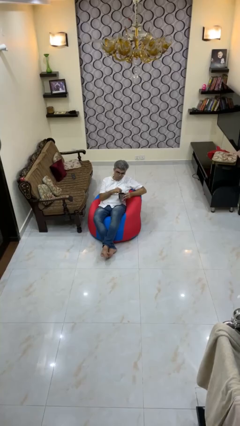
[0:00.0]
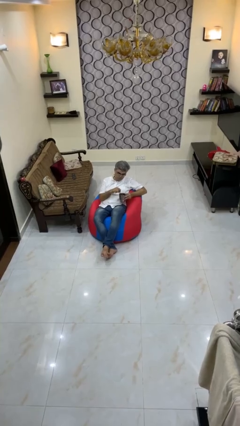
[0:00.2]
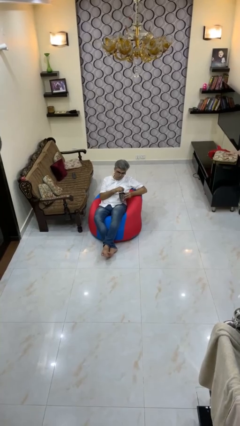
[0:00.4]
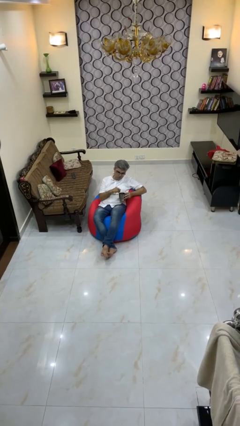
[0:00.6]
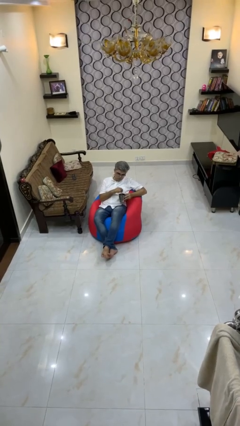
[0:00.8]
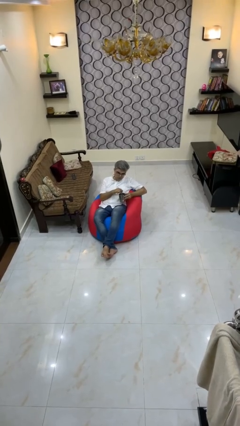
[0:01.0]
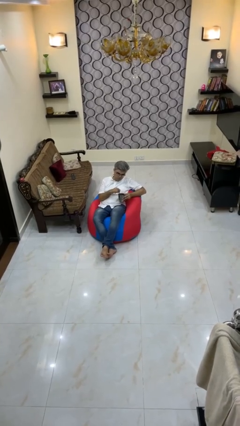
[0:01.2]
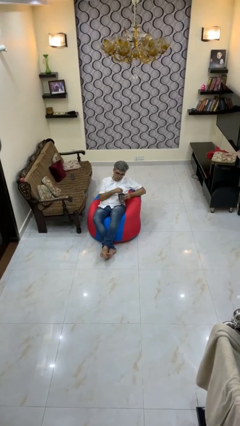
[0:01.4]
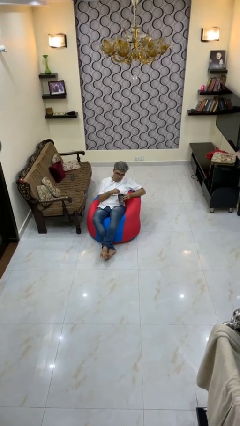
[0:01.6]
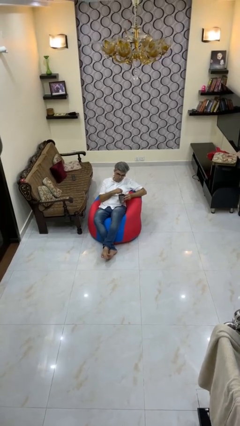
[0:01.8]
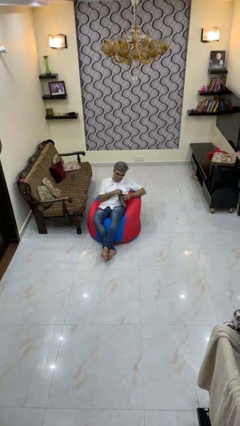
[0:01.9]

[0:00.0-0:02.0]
person stirs mug

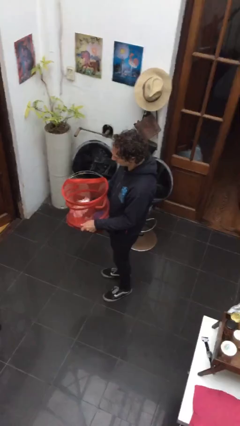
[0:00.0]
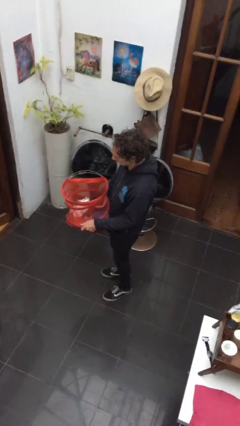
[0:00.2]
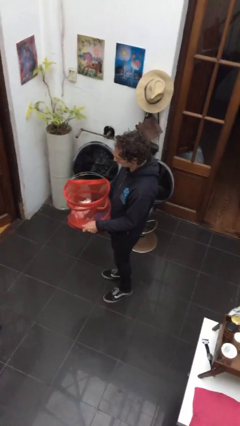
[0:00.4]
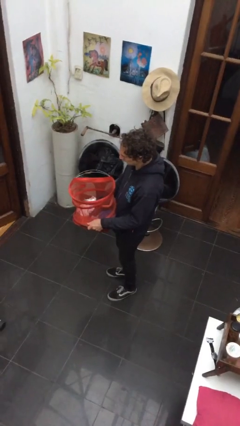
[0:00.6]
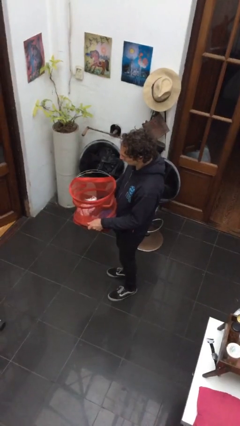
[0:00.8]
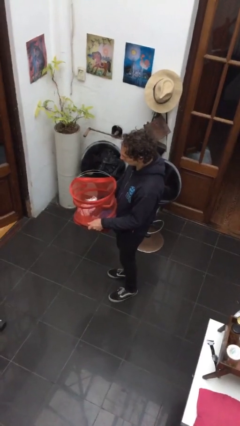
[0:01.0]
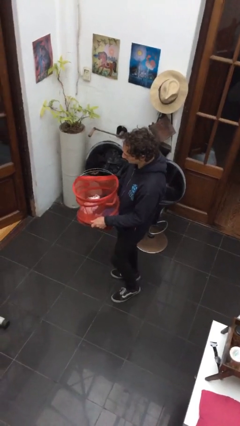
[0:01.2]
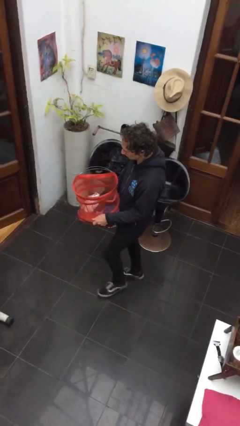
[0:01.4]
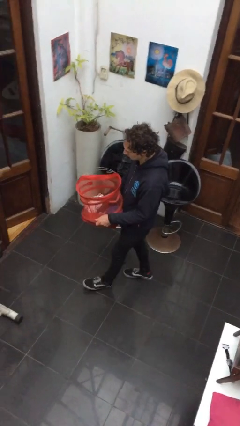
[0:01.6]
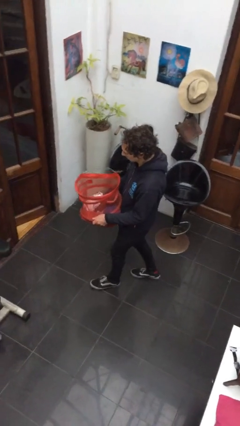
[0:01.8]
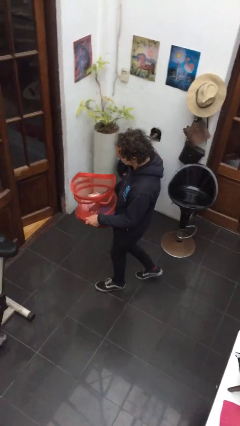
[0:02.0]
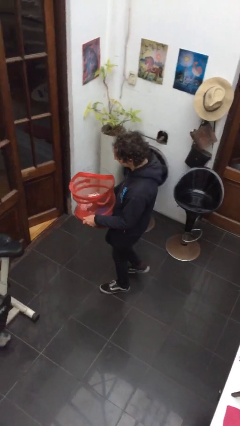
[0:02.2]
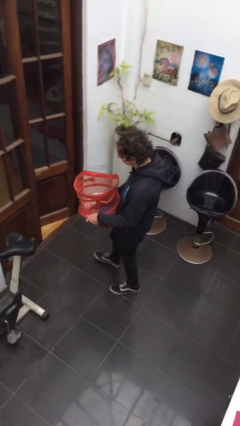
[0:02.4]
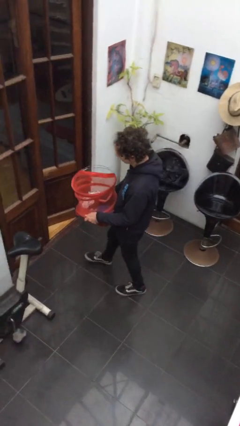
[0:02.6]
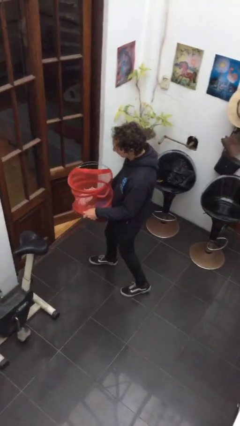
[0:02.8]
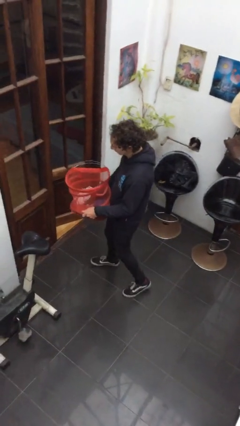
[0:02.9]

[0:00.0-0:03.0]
person carries laundry basket

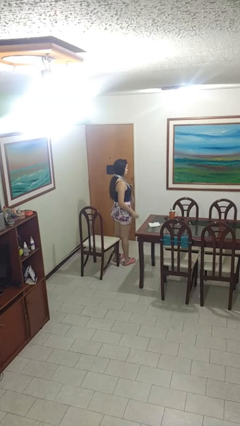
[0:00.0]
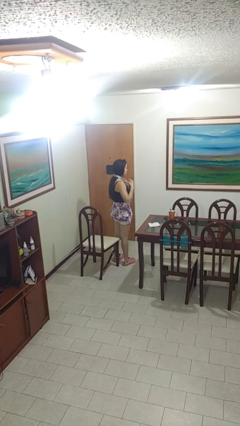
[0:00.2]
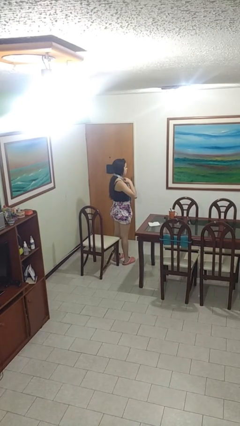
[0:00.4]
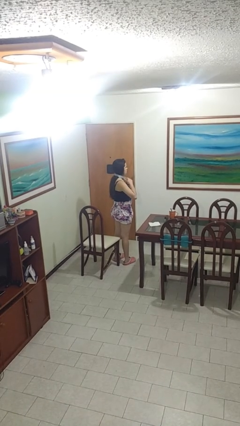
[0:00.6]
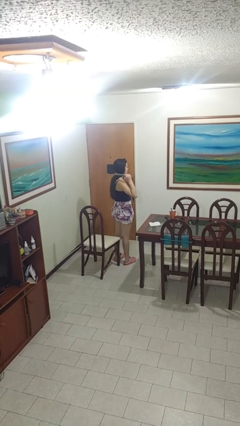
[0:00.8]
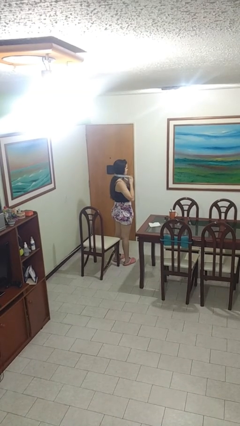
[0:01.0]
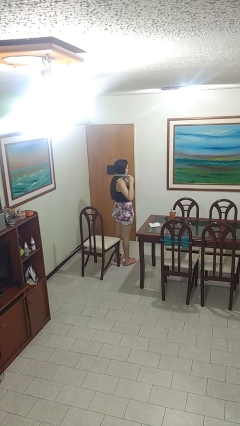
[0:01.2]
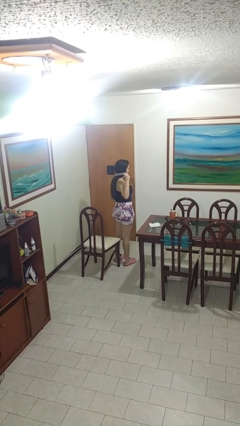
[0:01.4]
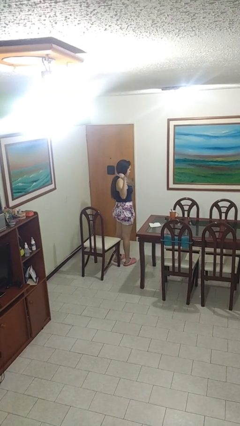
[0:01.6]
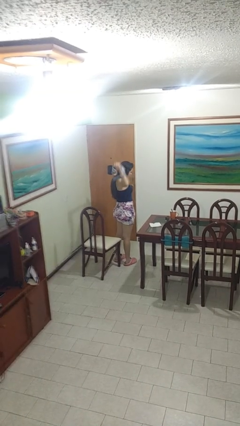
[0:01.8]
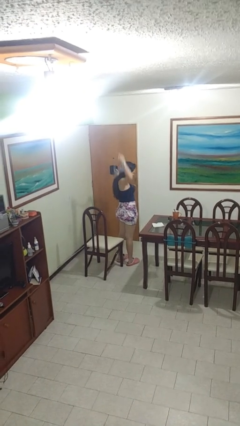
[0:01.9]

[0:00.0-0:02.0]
person takes off necktie

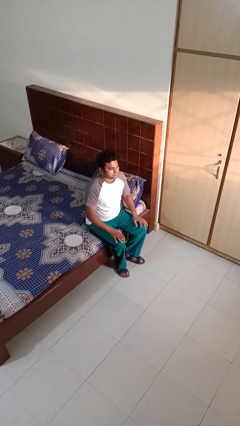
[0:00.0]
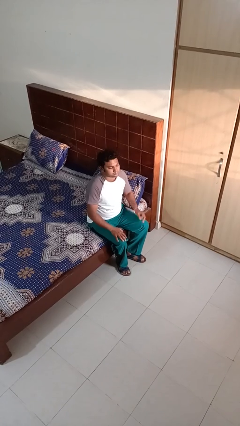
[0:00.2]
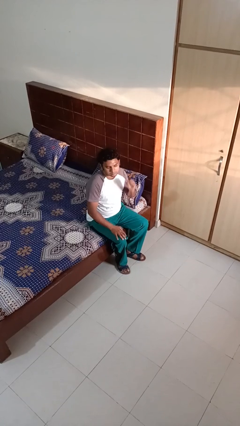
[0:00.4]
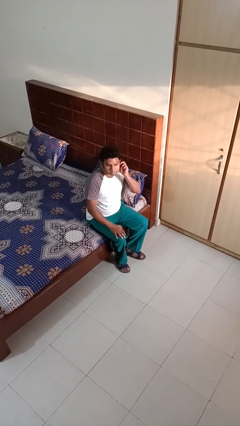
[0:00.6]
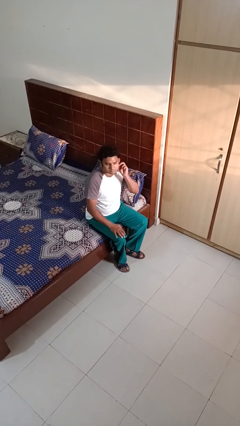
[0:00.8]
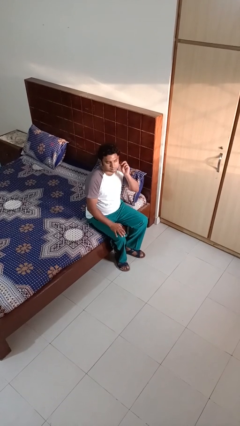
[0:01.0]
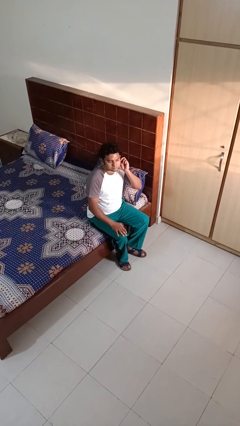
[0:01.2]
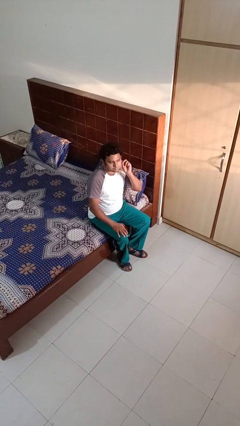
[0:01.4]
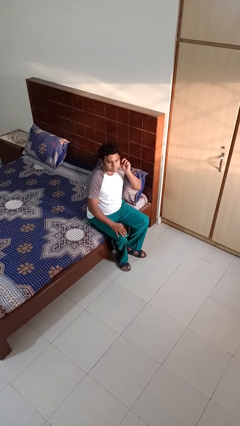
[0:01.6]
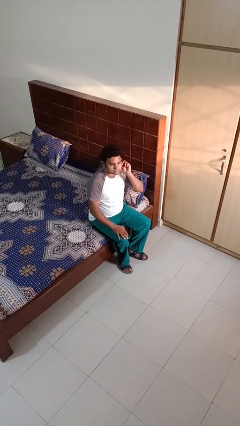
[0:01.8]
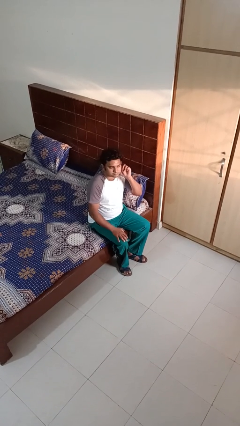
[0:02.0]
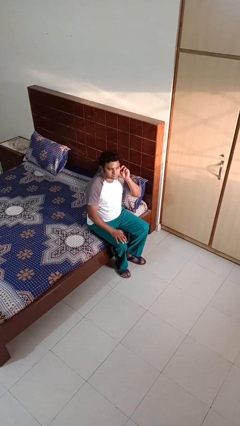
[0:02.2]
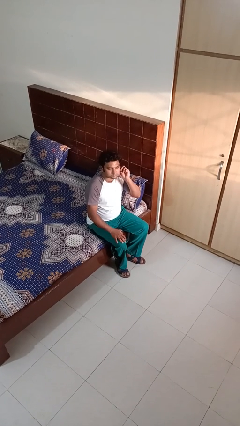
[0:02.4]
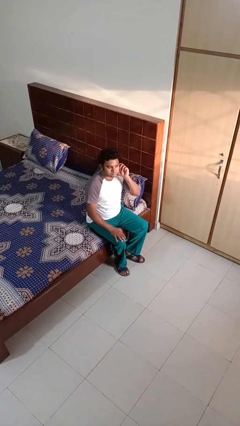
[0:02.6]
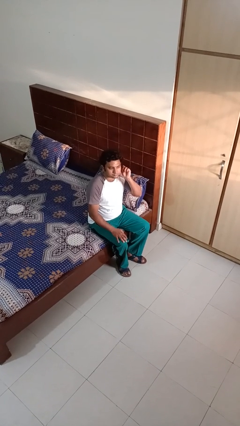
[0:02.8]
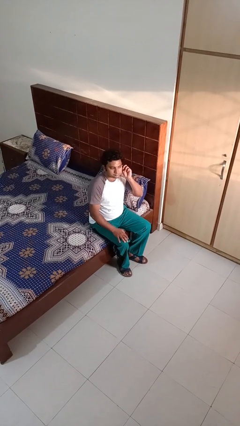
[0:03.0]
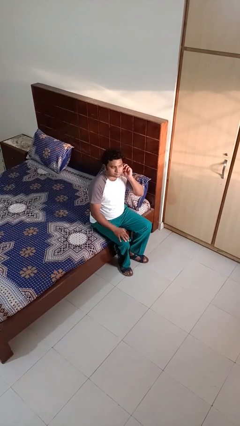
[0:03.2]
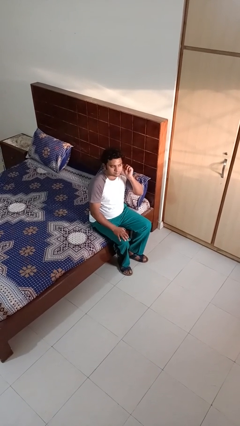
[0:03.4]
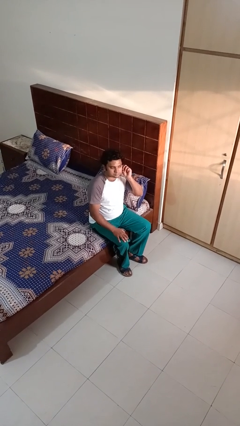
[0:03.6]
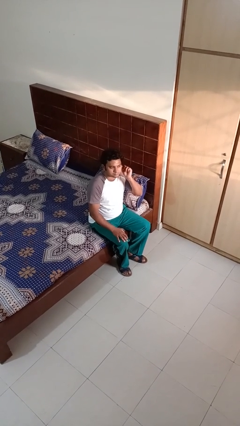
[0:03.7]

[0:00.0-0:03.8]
person touches earlobe

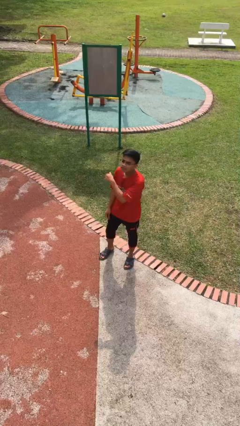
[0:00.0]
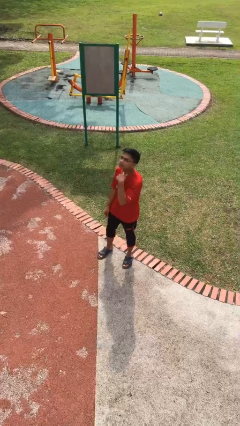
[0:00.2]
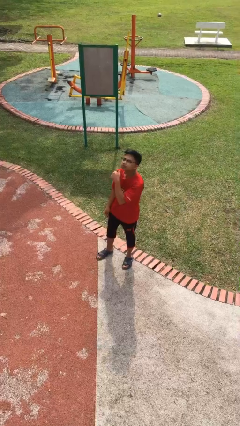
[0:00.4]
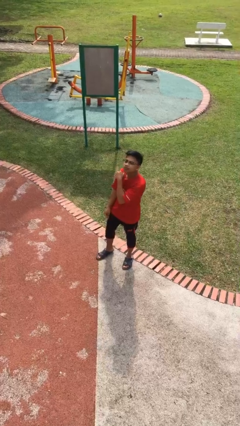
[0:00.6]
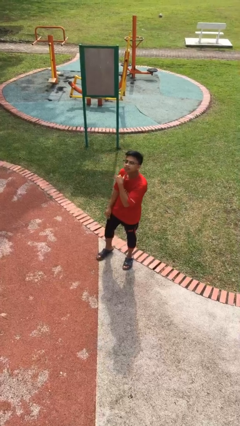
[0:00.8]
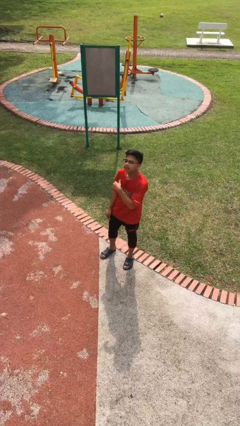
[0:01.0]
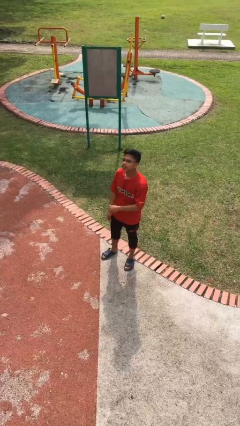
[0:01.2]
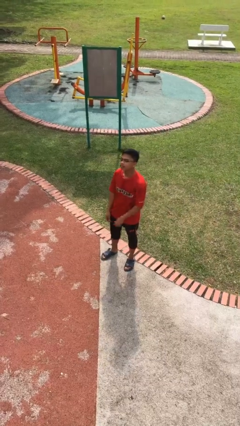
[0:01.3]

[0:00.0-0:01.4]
person gestures cut

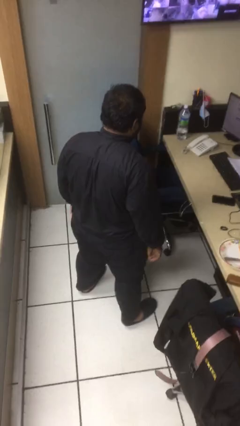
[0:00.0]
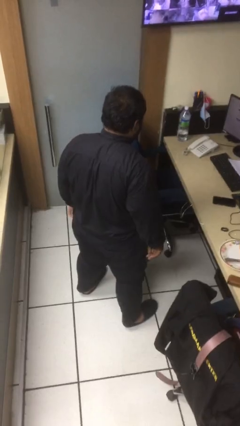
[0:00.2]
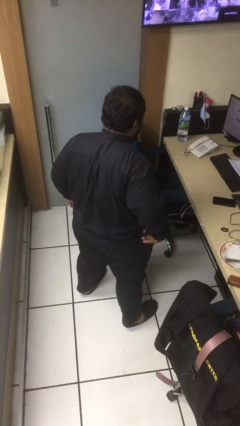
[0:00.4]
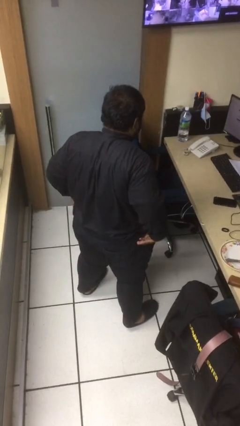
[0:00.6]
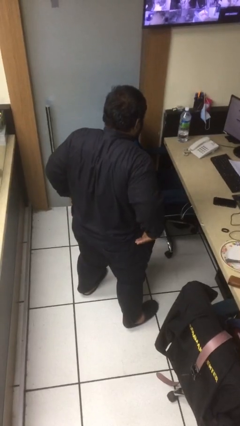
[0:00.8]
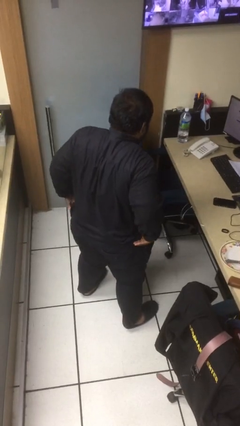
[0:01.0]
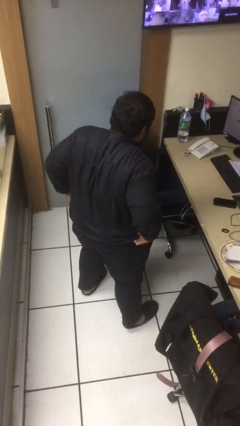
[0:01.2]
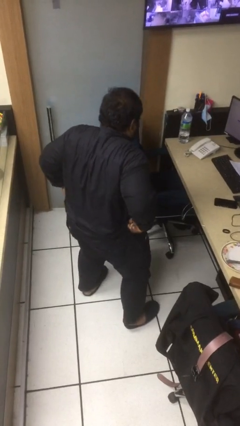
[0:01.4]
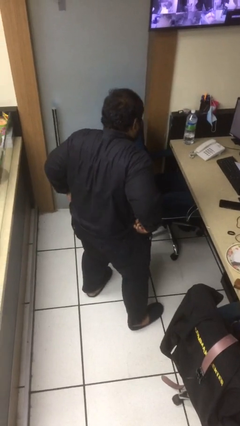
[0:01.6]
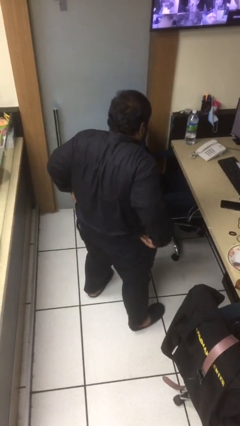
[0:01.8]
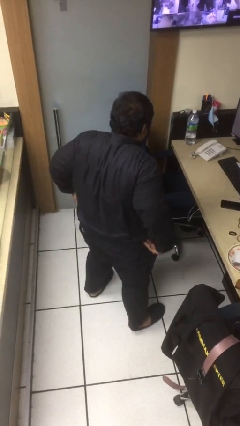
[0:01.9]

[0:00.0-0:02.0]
person hikes up pants

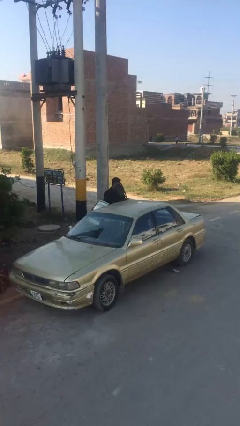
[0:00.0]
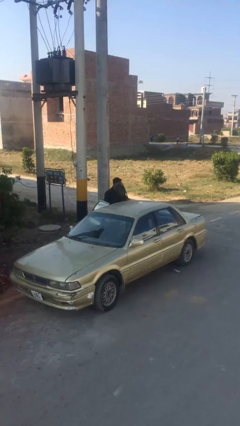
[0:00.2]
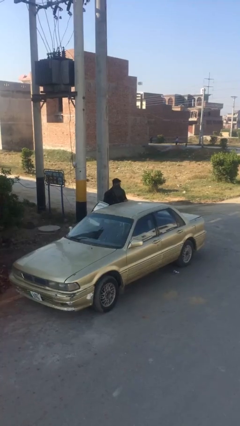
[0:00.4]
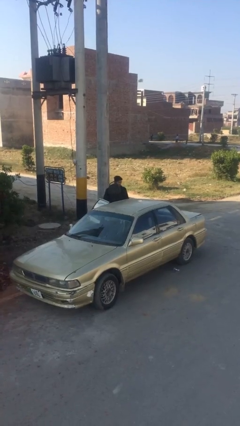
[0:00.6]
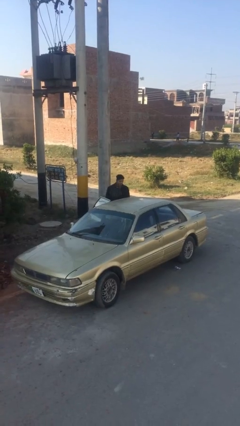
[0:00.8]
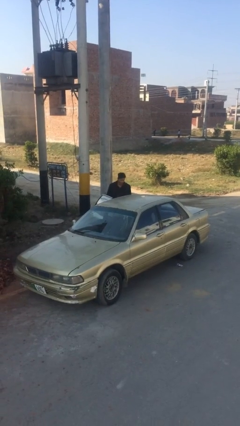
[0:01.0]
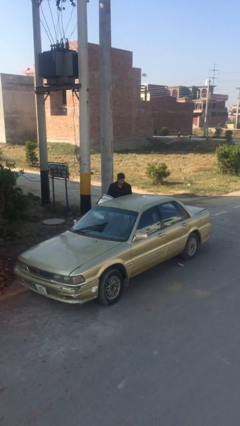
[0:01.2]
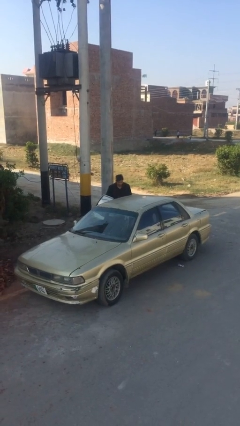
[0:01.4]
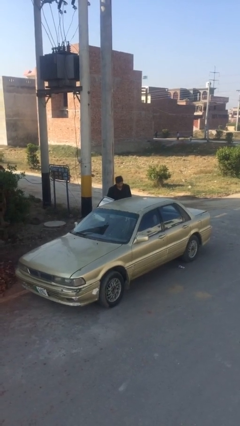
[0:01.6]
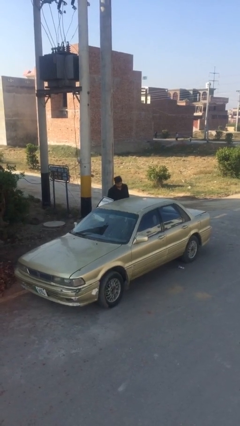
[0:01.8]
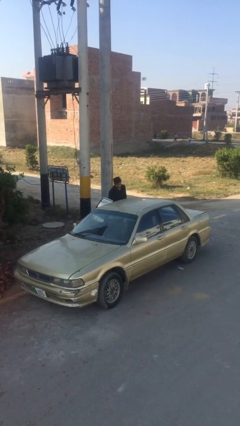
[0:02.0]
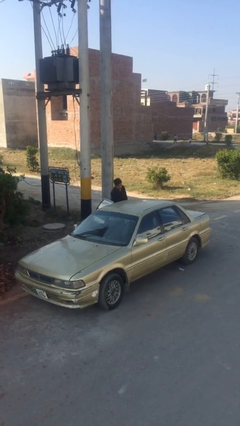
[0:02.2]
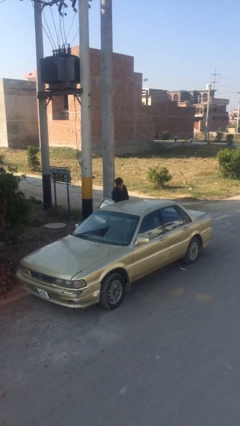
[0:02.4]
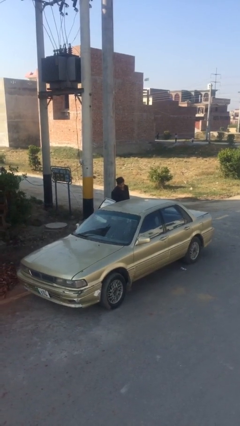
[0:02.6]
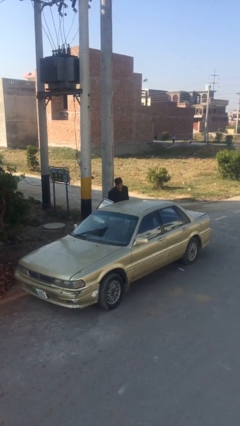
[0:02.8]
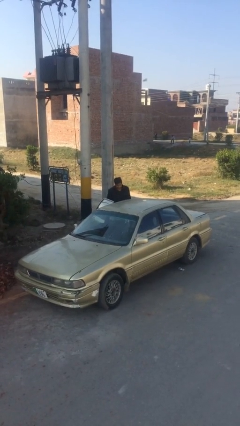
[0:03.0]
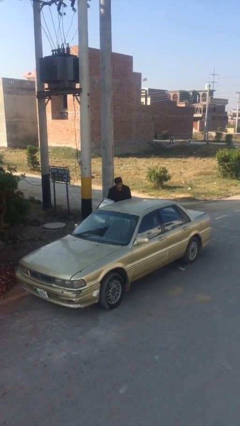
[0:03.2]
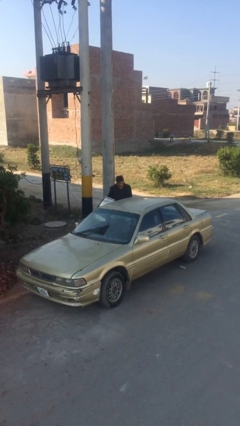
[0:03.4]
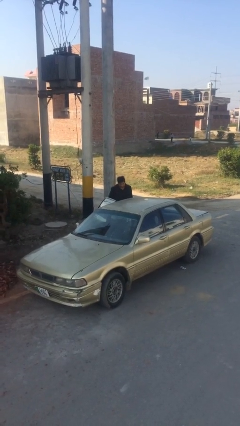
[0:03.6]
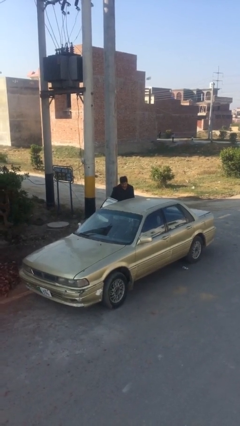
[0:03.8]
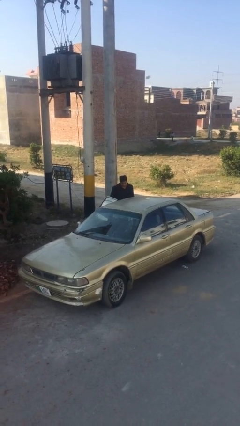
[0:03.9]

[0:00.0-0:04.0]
person loads car
